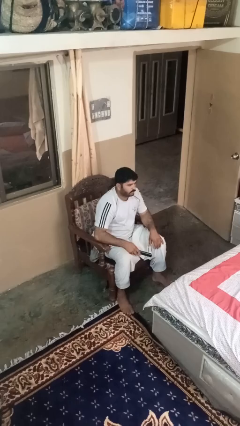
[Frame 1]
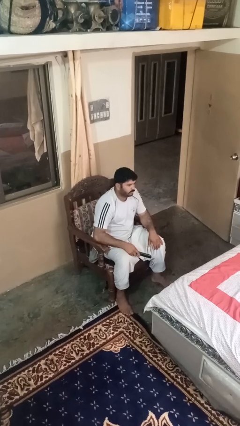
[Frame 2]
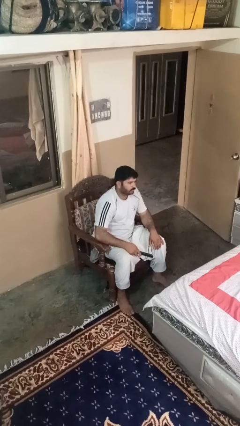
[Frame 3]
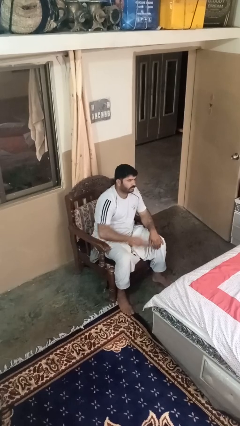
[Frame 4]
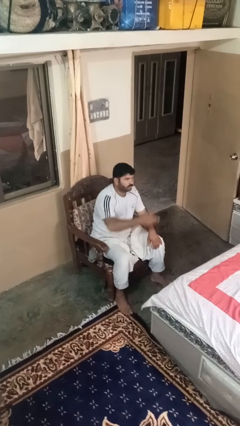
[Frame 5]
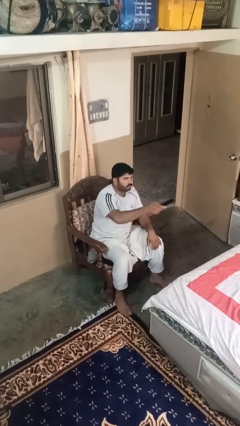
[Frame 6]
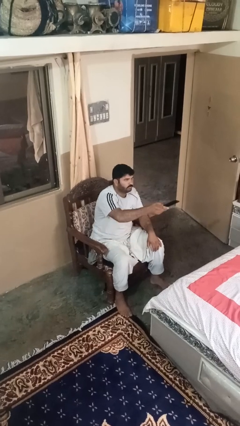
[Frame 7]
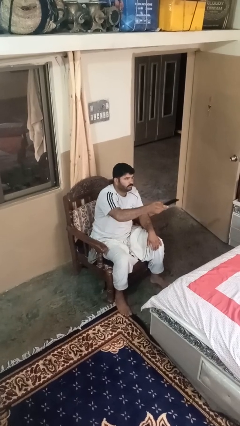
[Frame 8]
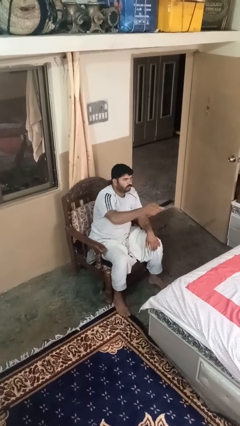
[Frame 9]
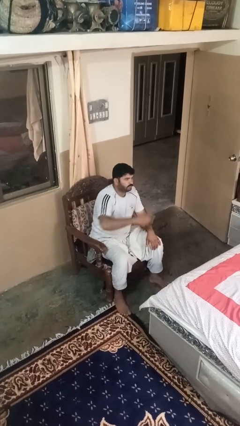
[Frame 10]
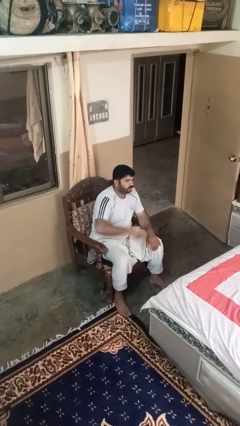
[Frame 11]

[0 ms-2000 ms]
person uses television remote

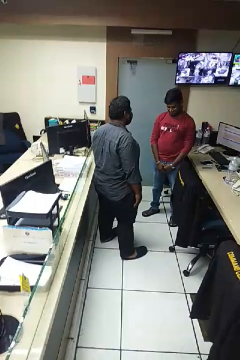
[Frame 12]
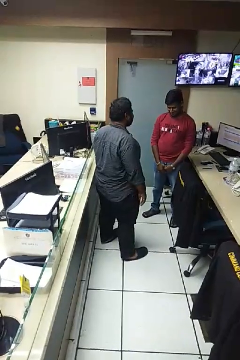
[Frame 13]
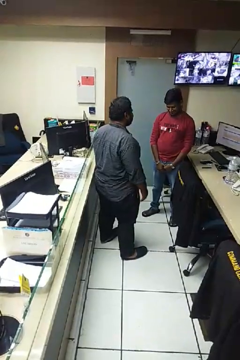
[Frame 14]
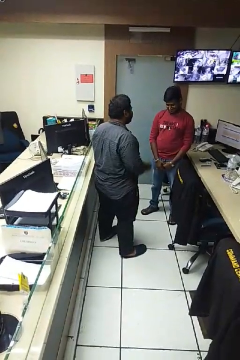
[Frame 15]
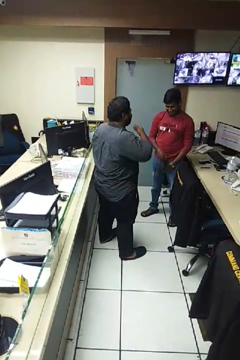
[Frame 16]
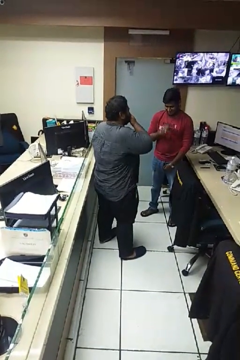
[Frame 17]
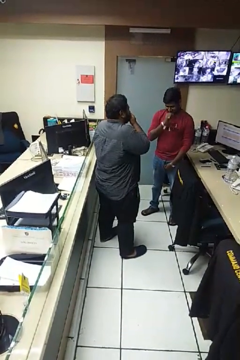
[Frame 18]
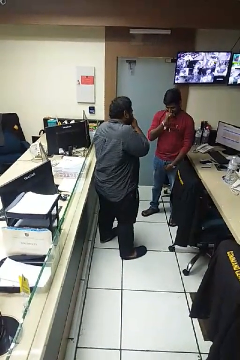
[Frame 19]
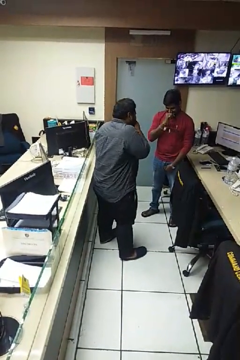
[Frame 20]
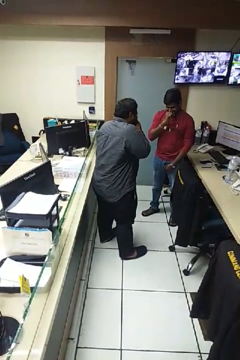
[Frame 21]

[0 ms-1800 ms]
person laughs with person

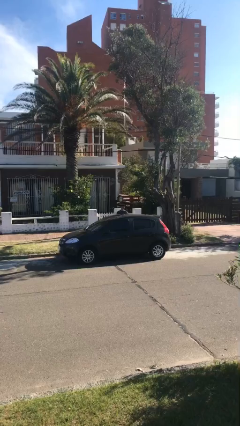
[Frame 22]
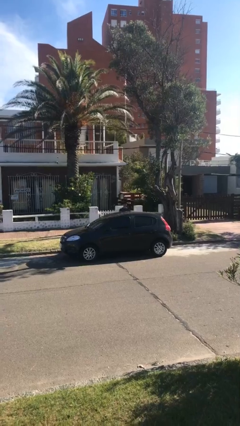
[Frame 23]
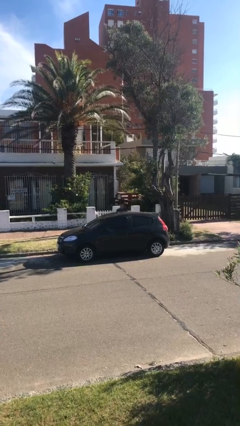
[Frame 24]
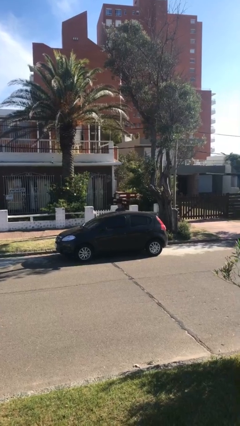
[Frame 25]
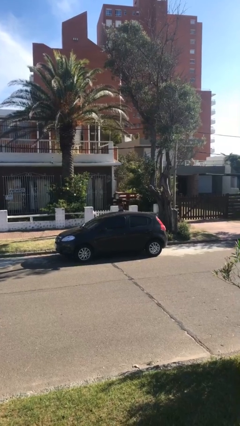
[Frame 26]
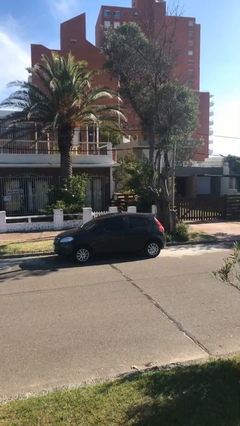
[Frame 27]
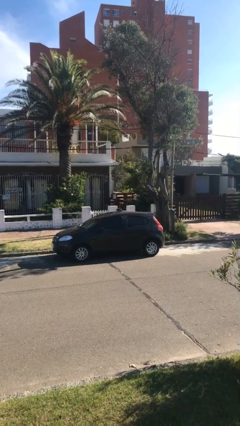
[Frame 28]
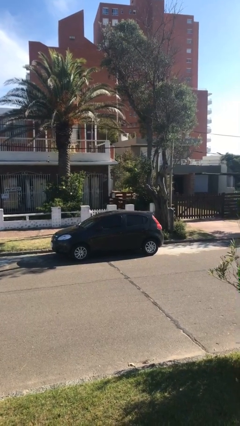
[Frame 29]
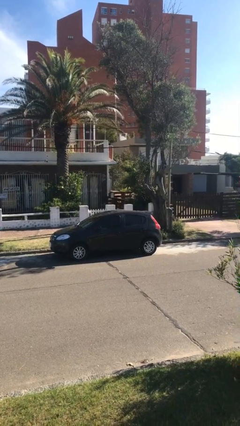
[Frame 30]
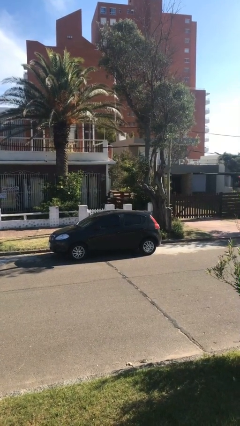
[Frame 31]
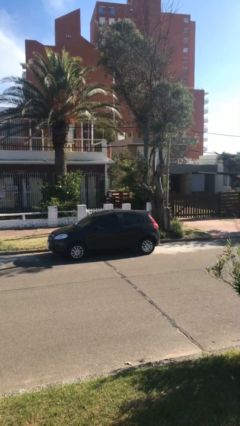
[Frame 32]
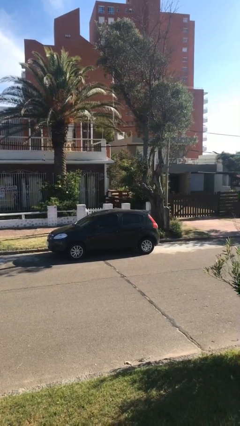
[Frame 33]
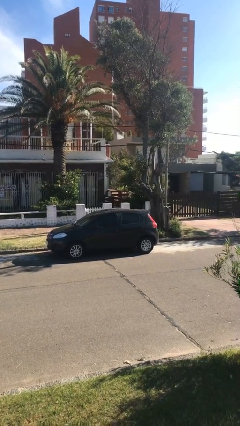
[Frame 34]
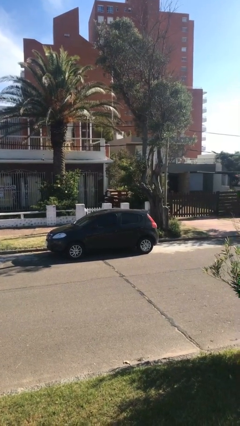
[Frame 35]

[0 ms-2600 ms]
person enters car

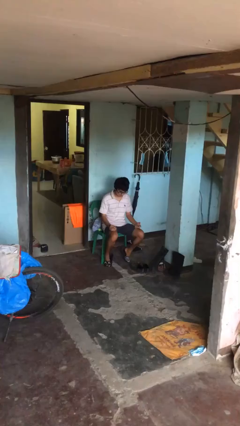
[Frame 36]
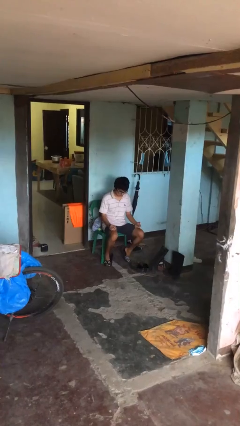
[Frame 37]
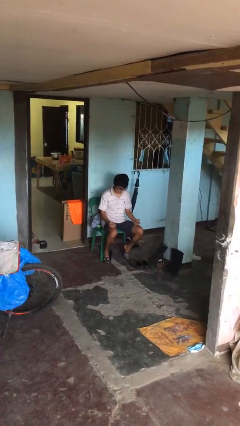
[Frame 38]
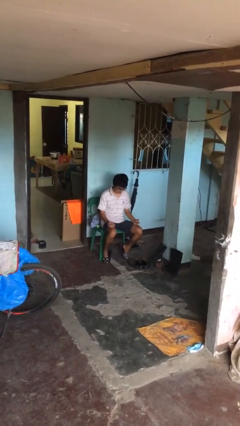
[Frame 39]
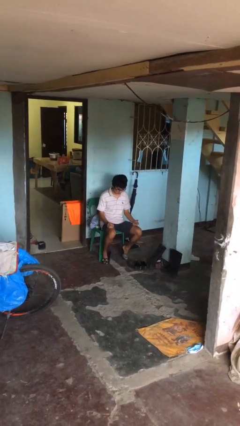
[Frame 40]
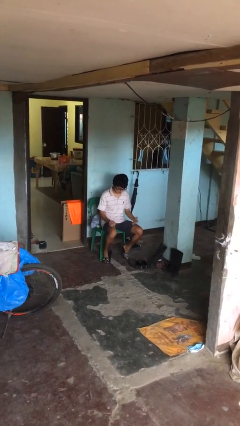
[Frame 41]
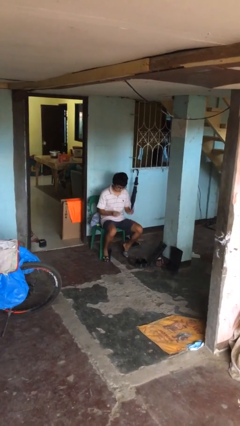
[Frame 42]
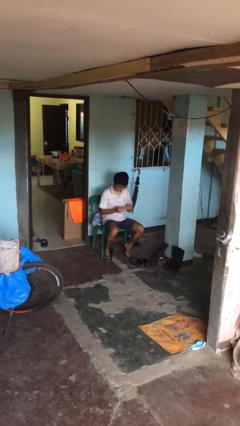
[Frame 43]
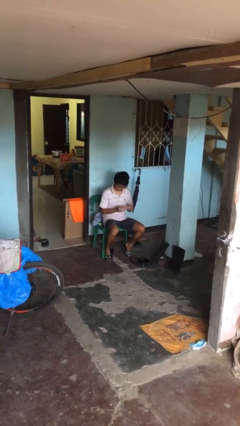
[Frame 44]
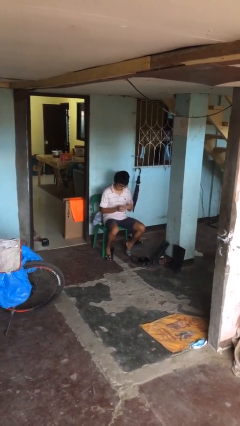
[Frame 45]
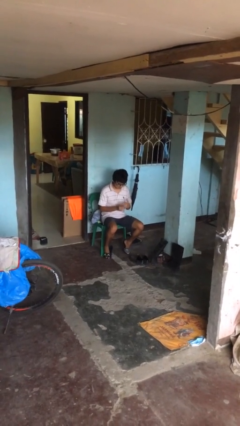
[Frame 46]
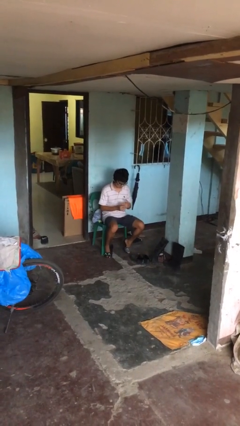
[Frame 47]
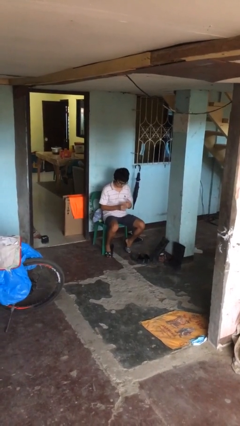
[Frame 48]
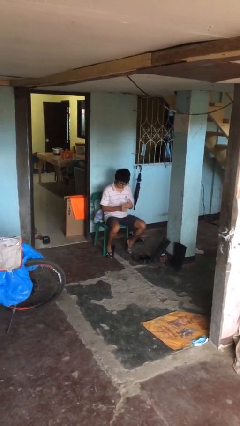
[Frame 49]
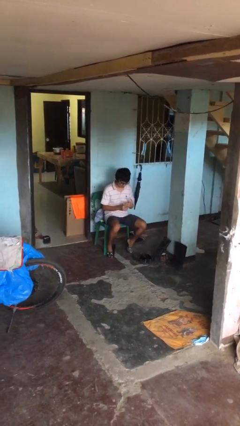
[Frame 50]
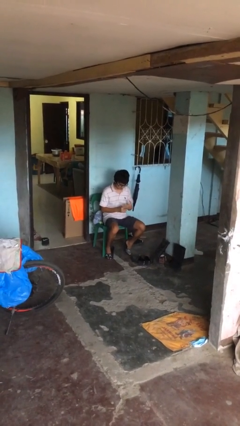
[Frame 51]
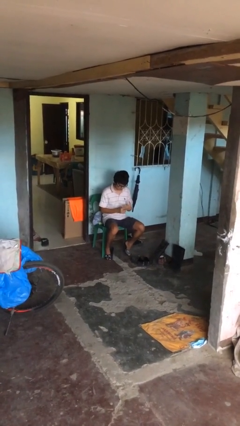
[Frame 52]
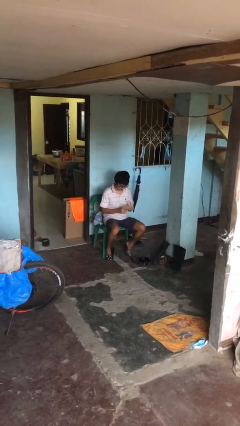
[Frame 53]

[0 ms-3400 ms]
person puts on ring

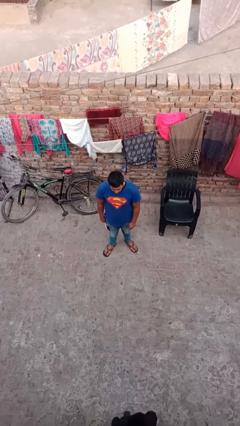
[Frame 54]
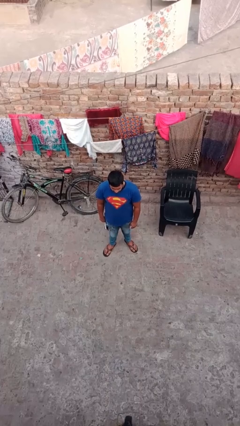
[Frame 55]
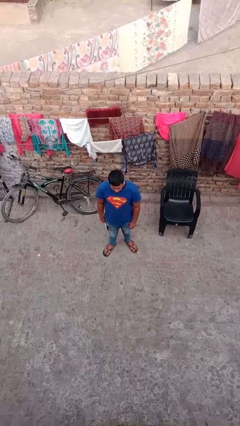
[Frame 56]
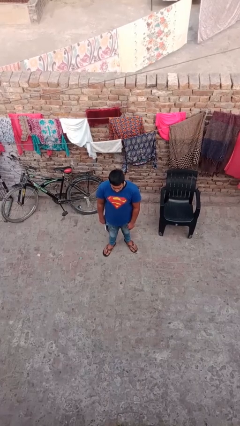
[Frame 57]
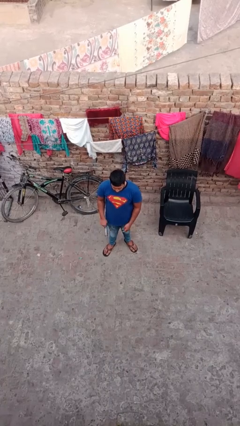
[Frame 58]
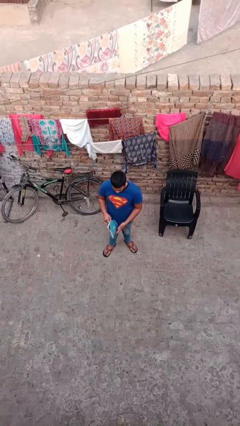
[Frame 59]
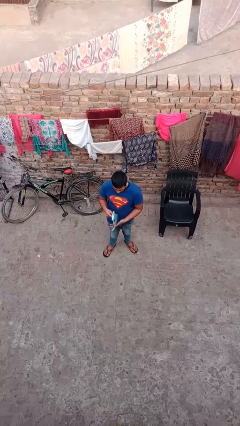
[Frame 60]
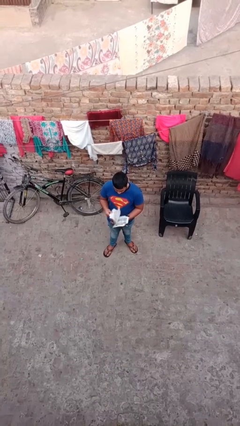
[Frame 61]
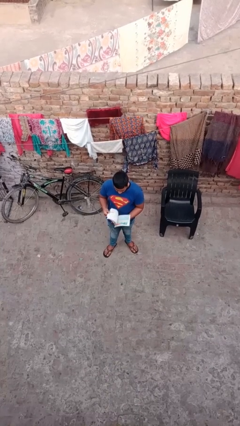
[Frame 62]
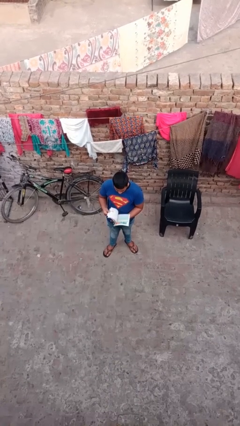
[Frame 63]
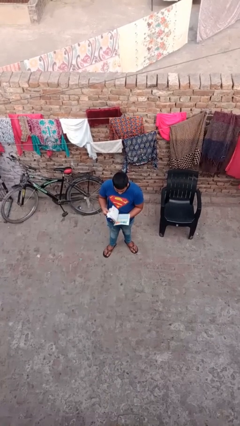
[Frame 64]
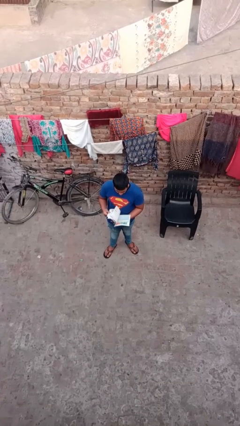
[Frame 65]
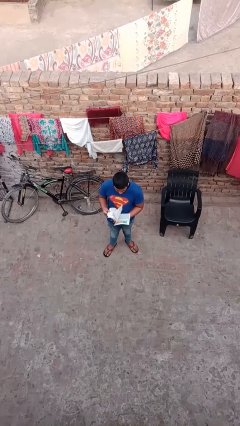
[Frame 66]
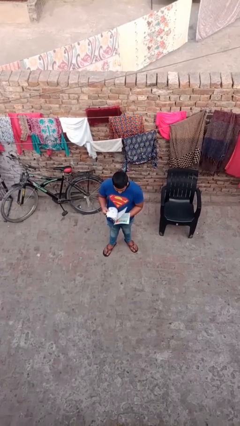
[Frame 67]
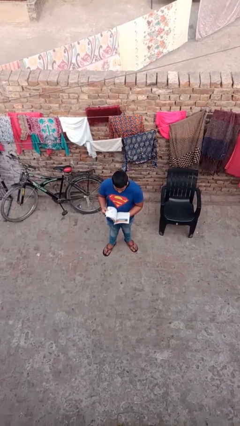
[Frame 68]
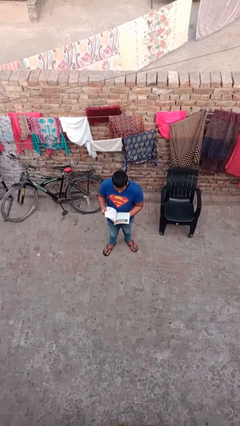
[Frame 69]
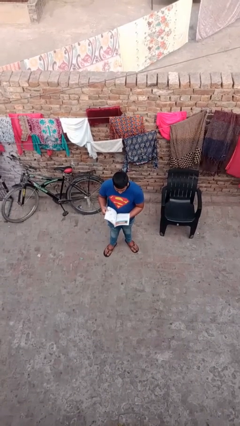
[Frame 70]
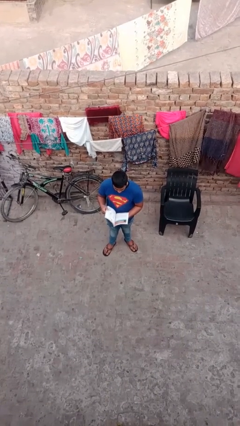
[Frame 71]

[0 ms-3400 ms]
person reads document

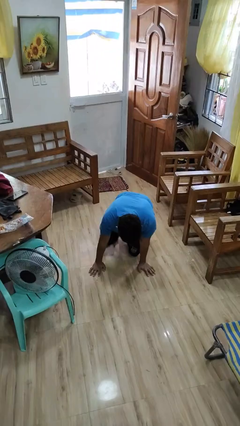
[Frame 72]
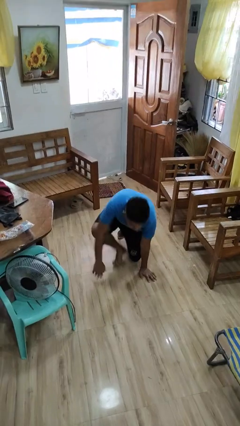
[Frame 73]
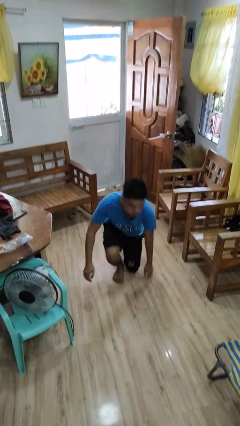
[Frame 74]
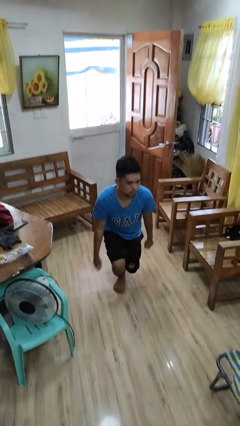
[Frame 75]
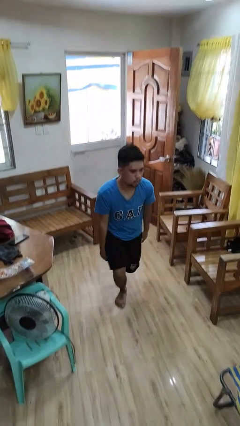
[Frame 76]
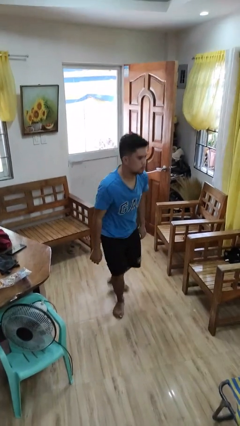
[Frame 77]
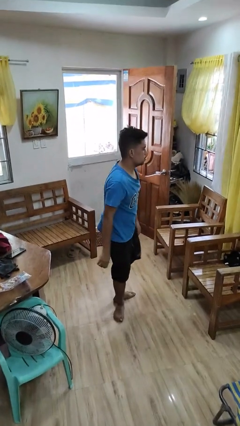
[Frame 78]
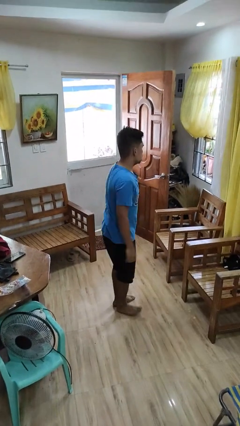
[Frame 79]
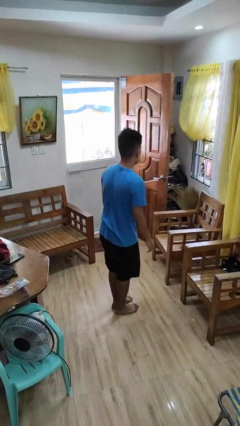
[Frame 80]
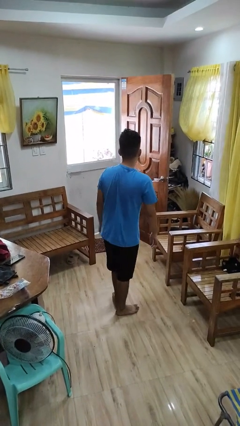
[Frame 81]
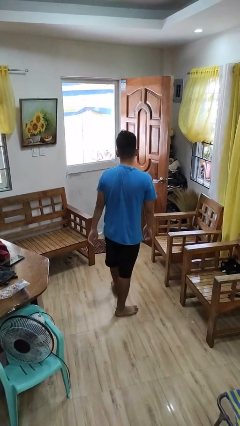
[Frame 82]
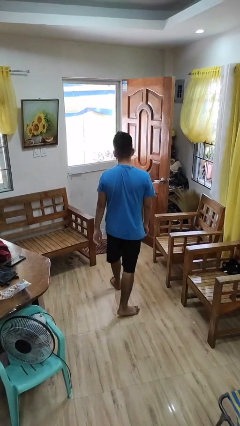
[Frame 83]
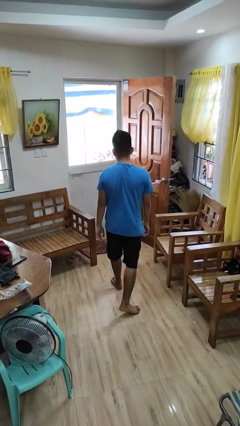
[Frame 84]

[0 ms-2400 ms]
person stands up from floor

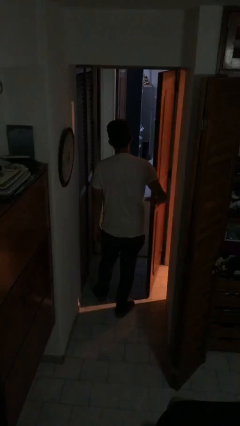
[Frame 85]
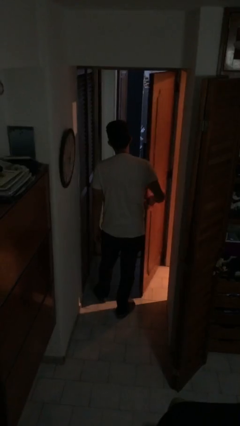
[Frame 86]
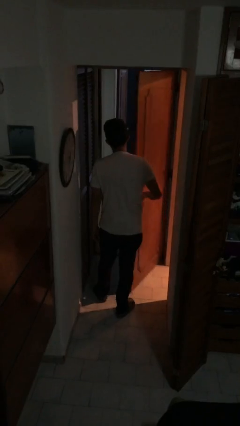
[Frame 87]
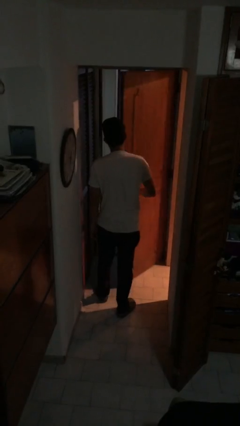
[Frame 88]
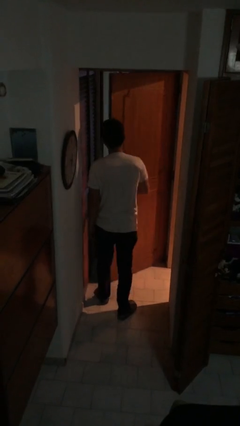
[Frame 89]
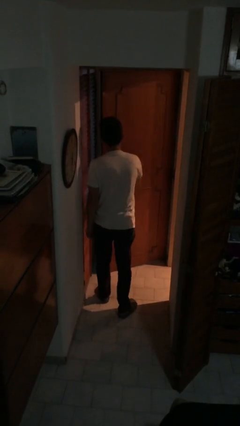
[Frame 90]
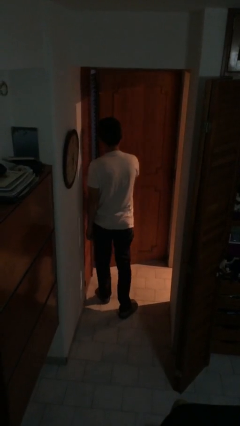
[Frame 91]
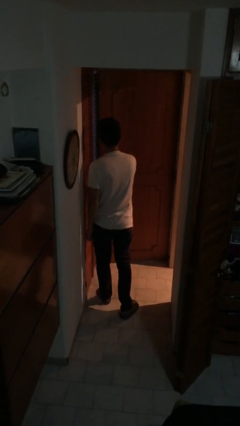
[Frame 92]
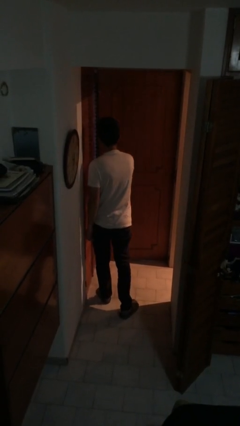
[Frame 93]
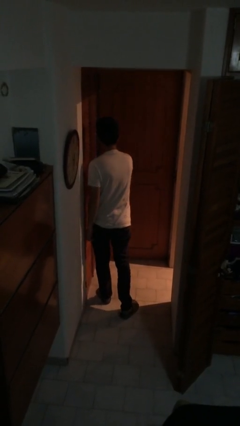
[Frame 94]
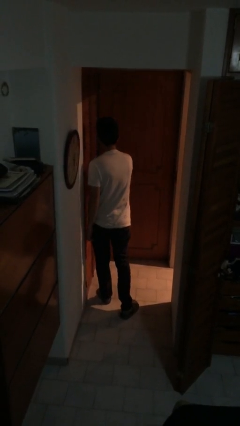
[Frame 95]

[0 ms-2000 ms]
person closes facility door
